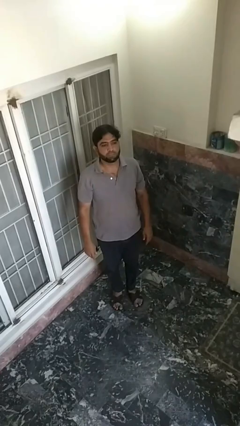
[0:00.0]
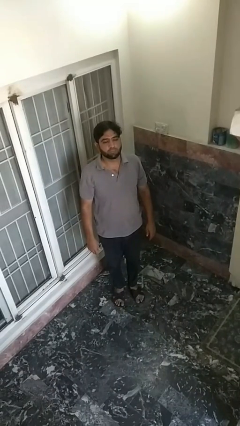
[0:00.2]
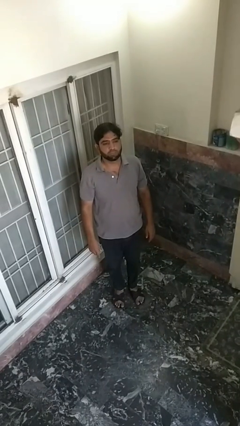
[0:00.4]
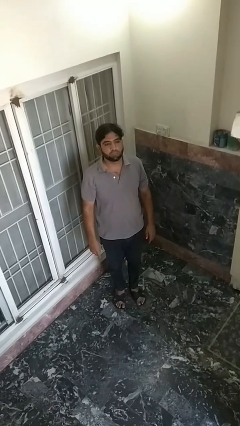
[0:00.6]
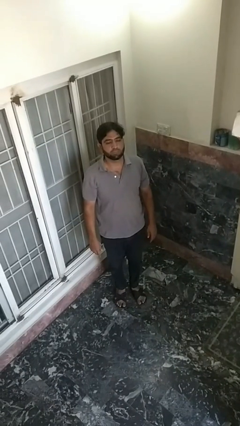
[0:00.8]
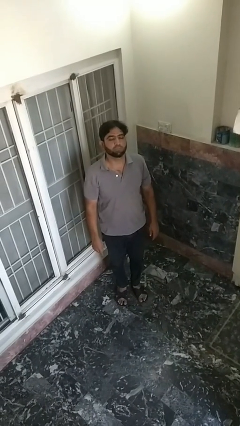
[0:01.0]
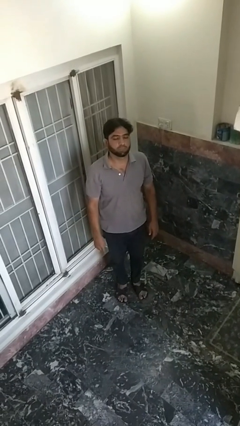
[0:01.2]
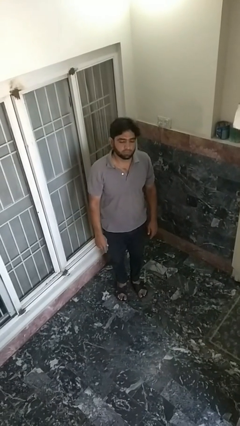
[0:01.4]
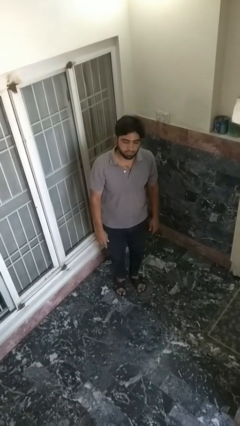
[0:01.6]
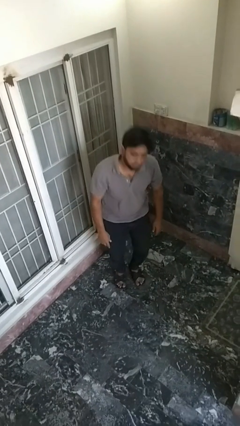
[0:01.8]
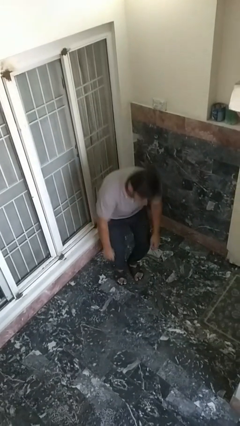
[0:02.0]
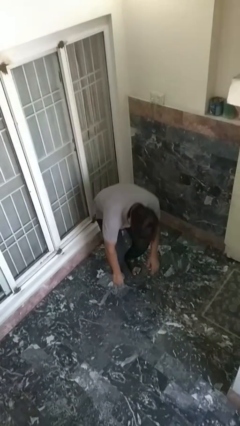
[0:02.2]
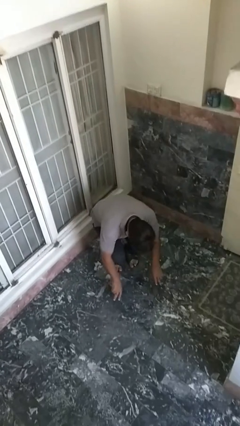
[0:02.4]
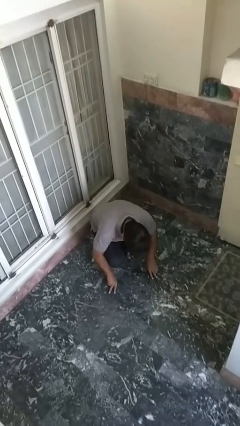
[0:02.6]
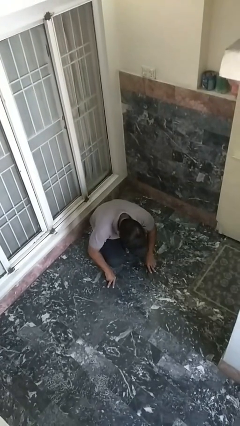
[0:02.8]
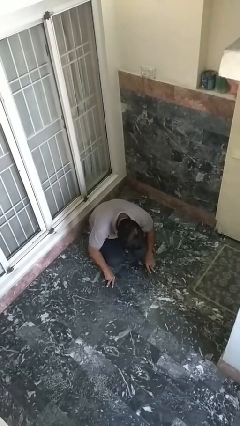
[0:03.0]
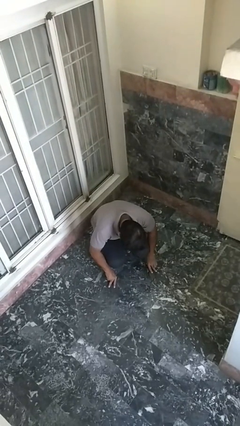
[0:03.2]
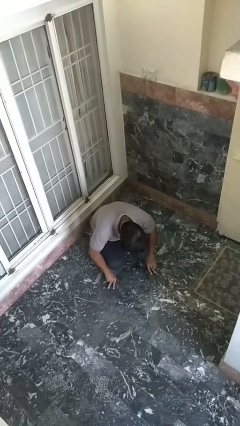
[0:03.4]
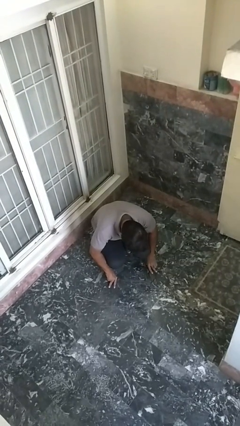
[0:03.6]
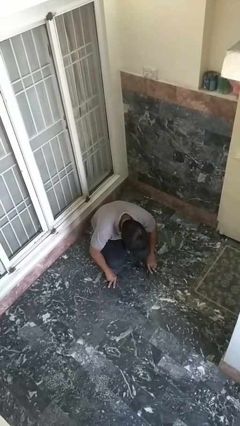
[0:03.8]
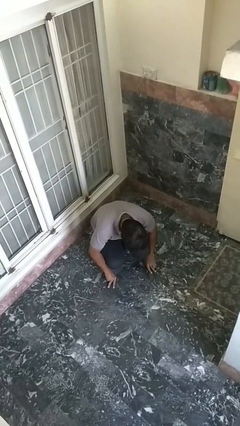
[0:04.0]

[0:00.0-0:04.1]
person falls while standing

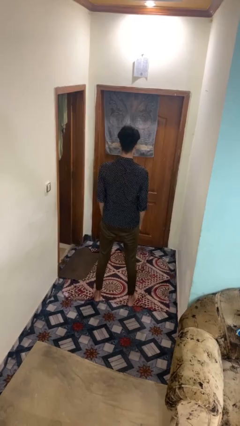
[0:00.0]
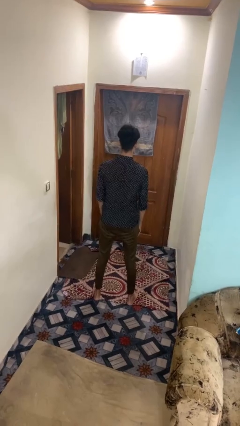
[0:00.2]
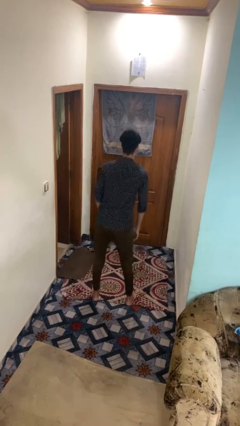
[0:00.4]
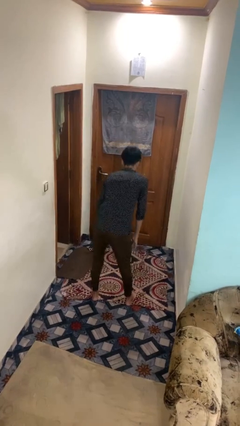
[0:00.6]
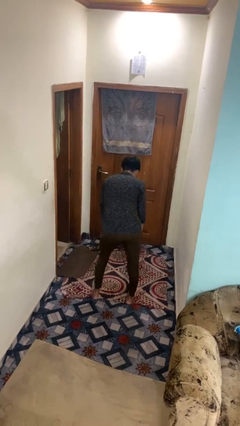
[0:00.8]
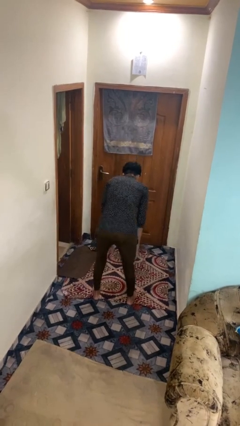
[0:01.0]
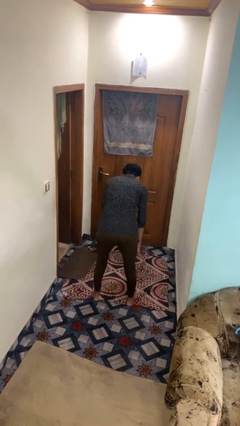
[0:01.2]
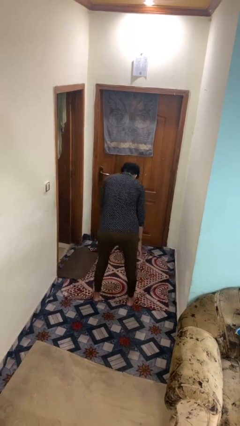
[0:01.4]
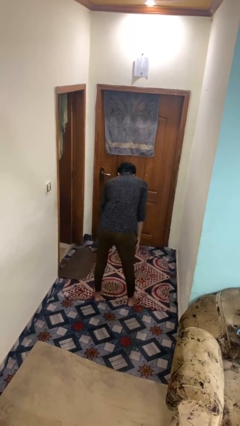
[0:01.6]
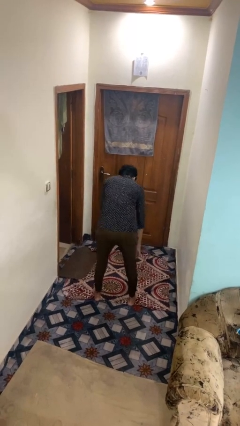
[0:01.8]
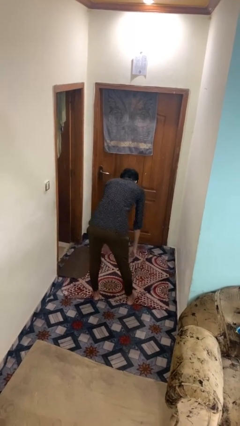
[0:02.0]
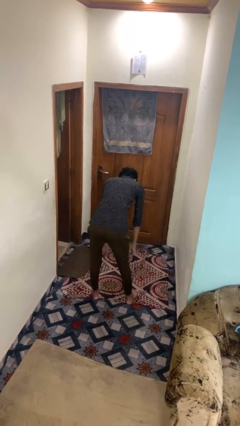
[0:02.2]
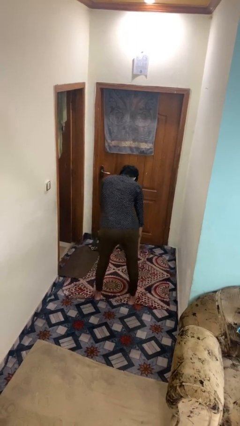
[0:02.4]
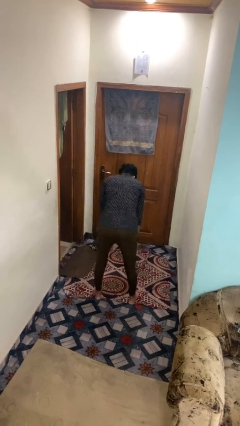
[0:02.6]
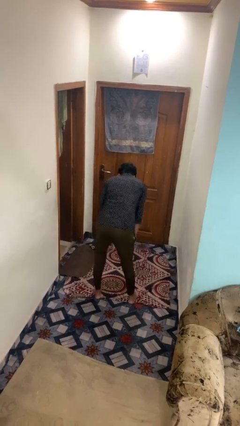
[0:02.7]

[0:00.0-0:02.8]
person wiggles hips

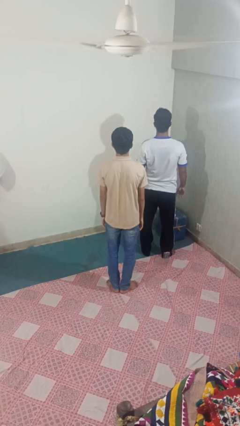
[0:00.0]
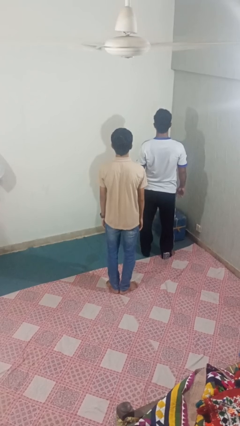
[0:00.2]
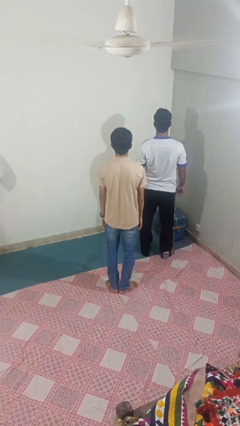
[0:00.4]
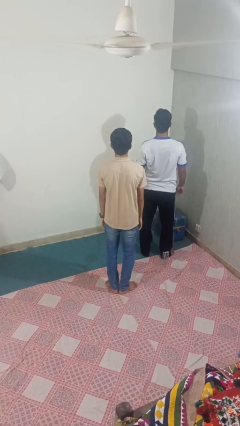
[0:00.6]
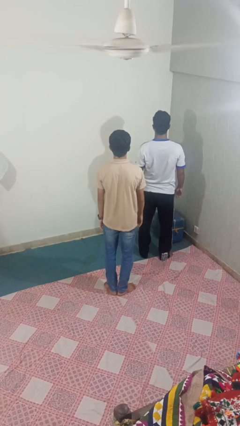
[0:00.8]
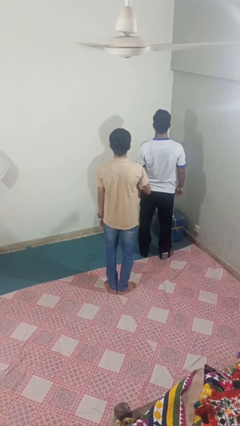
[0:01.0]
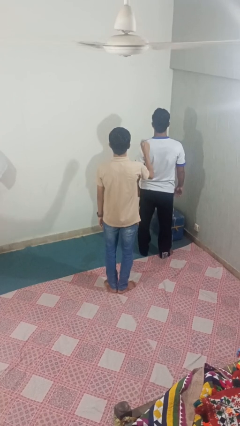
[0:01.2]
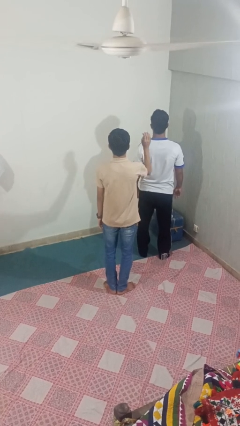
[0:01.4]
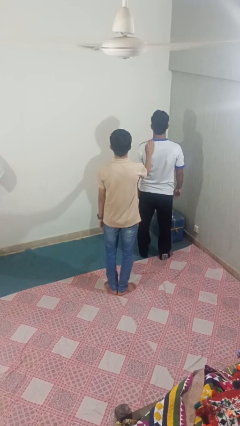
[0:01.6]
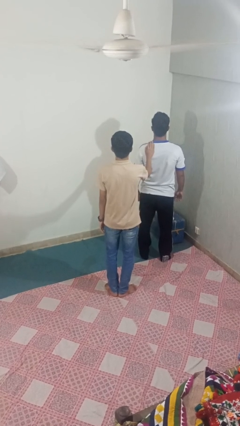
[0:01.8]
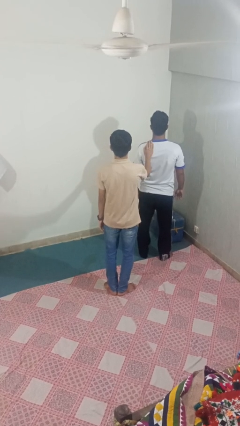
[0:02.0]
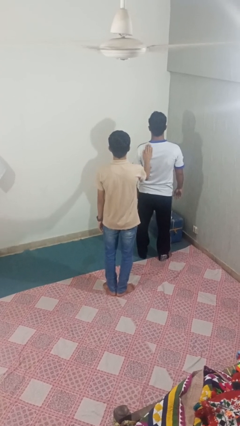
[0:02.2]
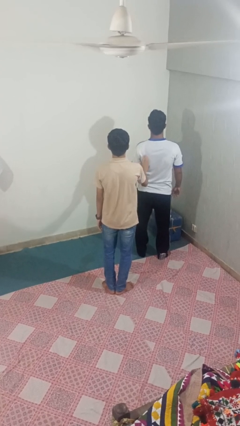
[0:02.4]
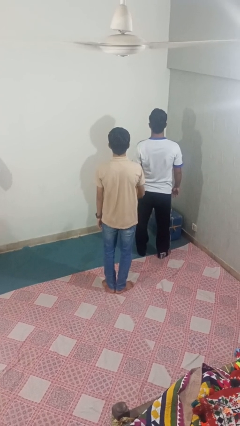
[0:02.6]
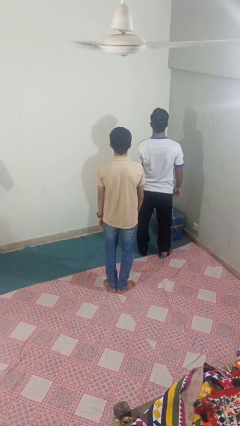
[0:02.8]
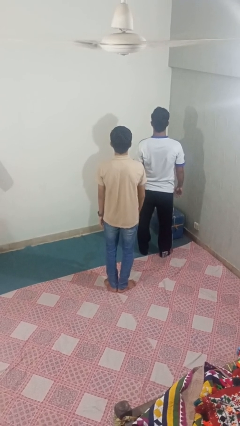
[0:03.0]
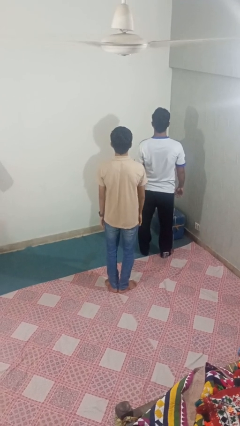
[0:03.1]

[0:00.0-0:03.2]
person touches back of person

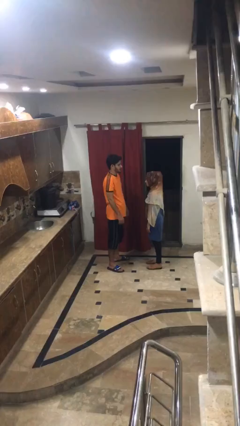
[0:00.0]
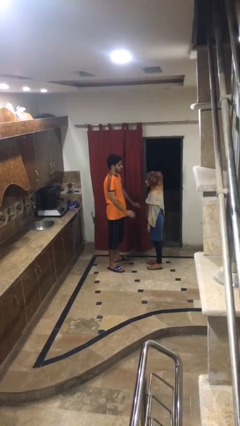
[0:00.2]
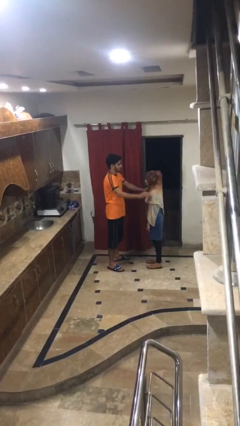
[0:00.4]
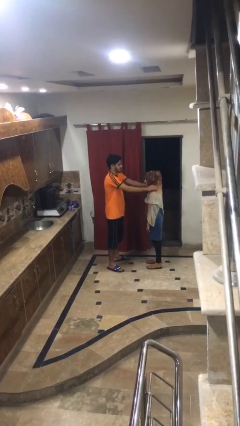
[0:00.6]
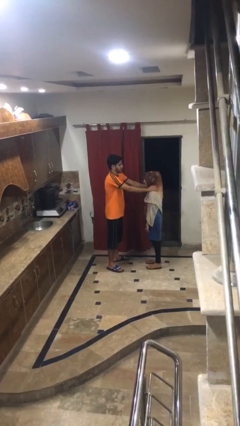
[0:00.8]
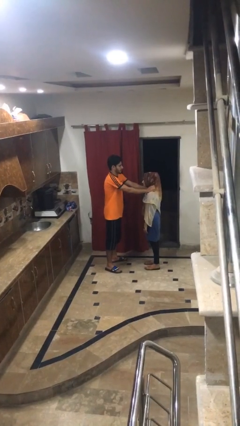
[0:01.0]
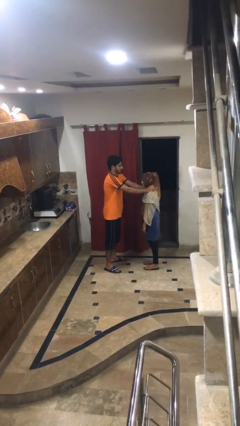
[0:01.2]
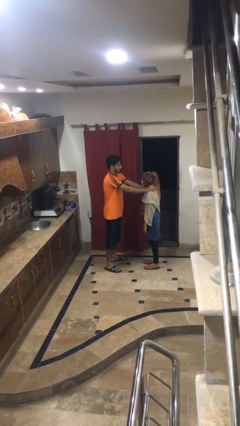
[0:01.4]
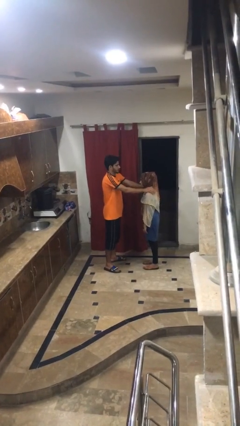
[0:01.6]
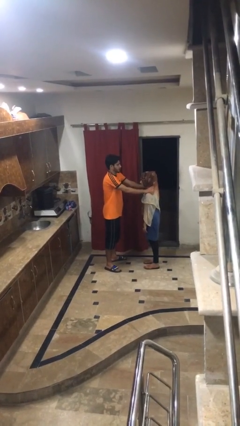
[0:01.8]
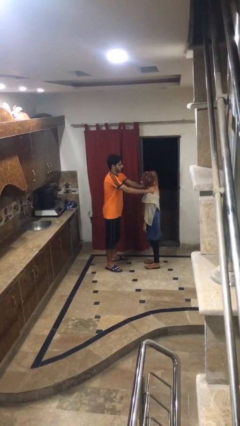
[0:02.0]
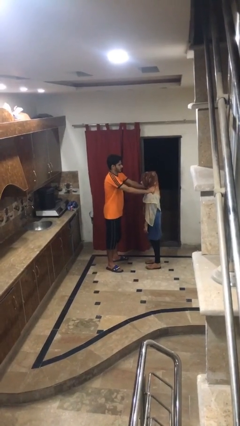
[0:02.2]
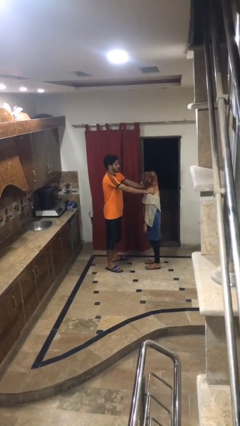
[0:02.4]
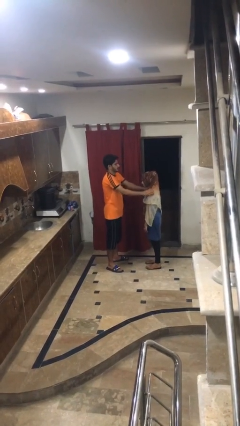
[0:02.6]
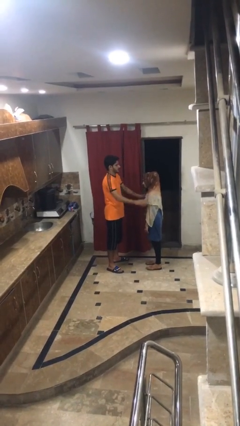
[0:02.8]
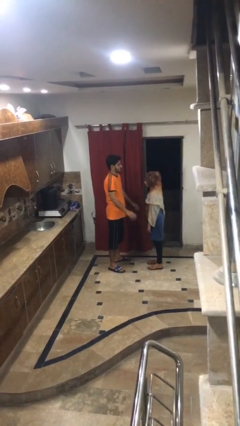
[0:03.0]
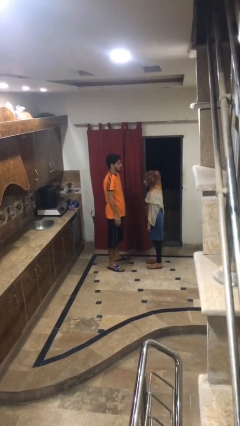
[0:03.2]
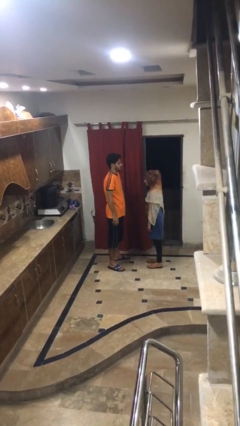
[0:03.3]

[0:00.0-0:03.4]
person pounds shoulders of person

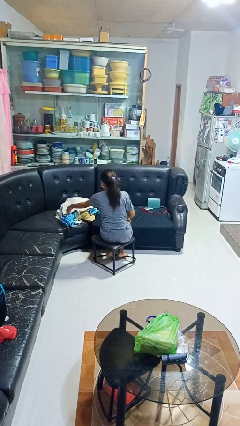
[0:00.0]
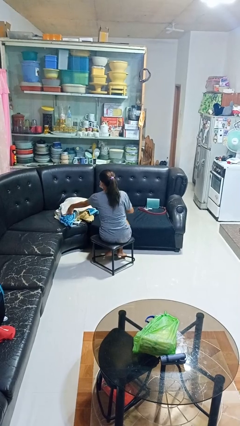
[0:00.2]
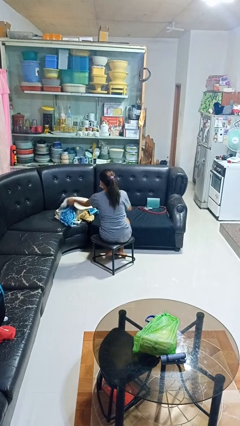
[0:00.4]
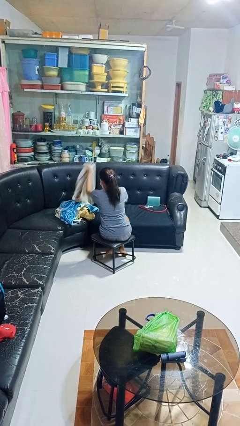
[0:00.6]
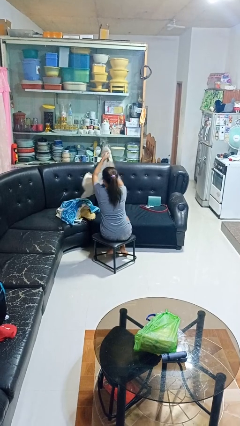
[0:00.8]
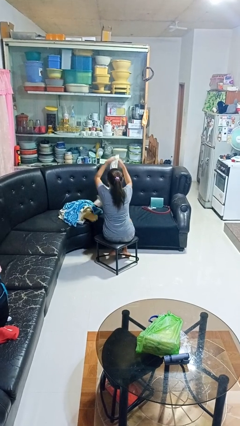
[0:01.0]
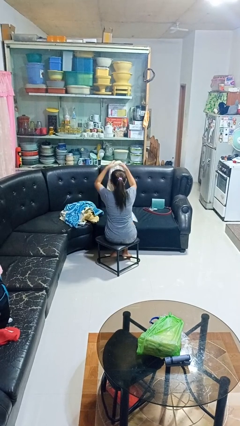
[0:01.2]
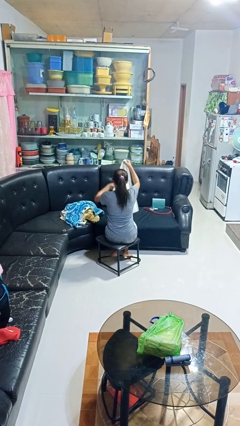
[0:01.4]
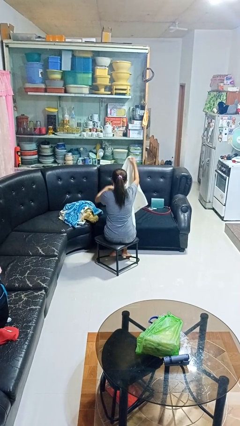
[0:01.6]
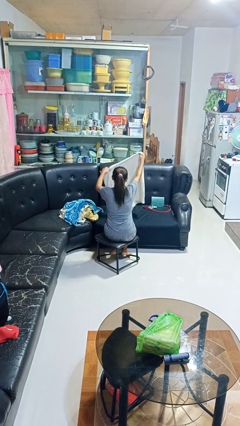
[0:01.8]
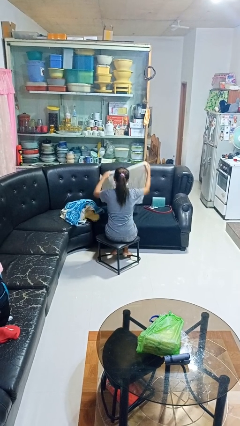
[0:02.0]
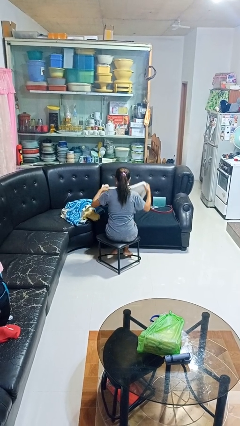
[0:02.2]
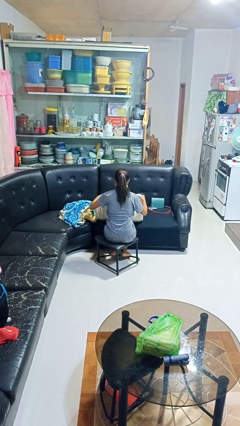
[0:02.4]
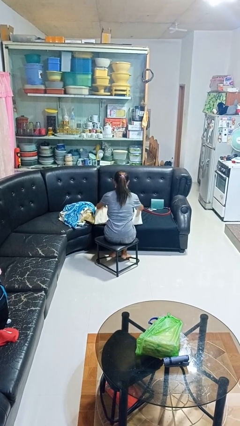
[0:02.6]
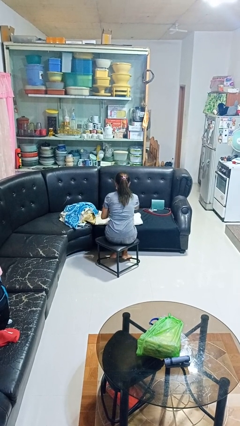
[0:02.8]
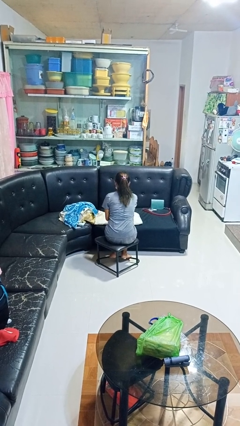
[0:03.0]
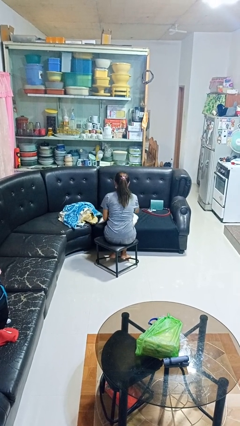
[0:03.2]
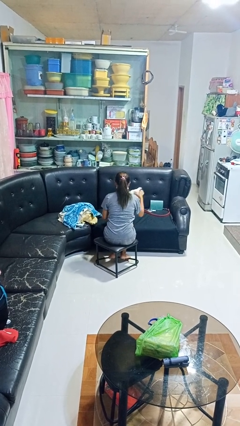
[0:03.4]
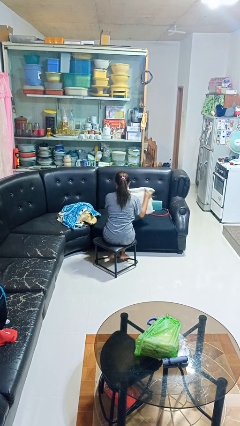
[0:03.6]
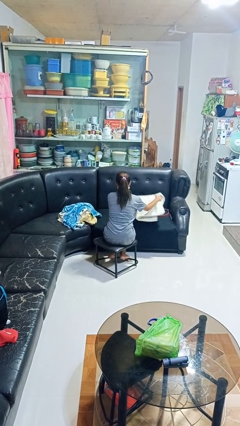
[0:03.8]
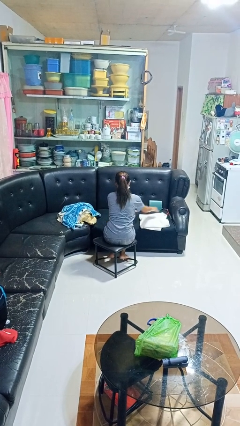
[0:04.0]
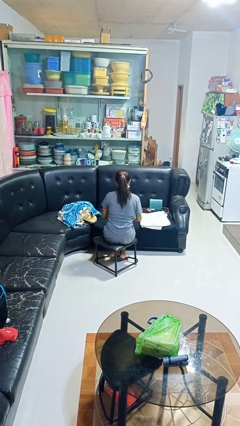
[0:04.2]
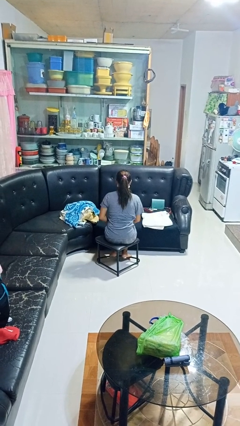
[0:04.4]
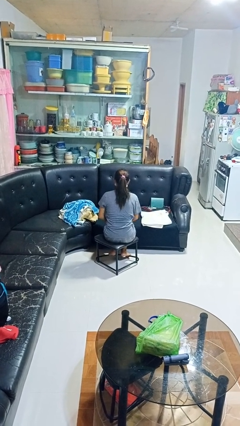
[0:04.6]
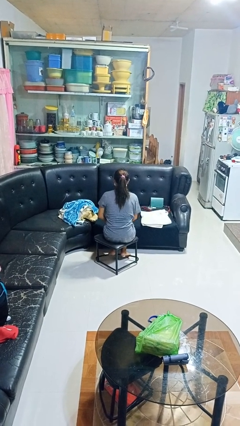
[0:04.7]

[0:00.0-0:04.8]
person folds towel
